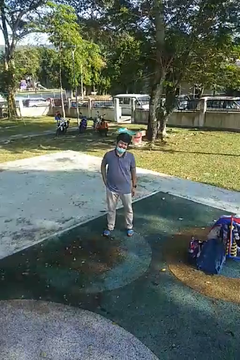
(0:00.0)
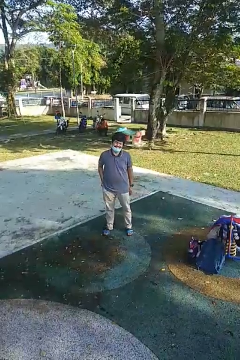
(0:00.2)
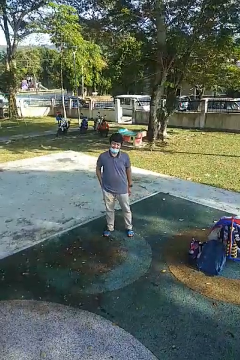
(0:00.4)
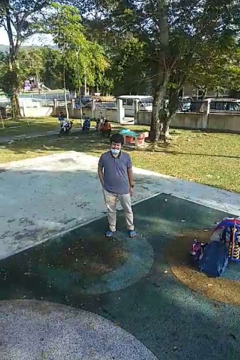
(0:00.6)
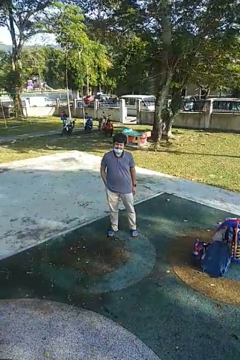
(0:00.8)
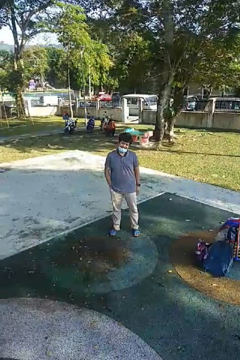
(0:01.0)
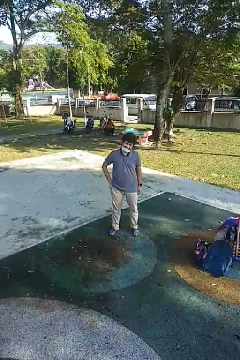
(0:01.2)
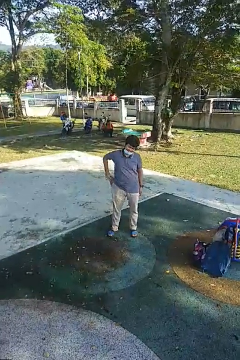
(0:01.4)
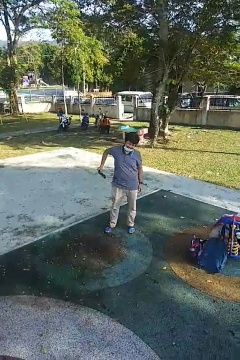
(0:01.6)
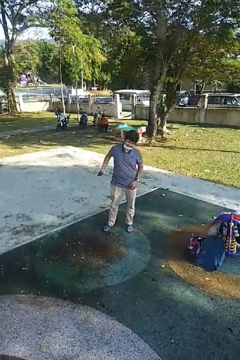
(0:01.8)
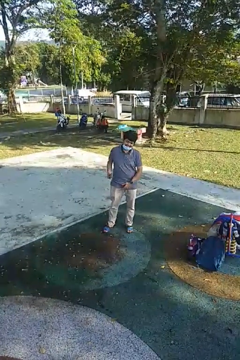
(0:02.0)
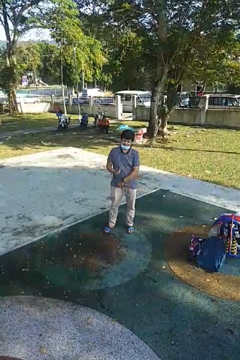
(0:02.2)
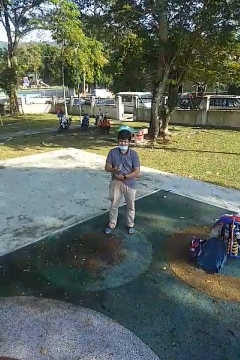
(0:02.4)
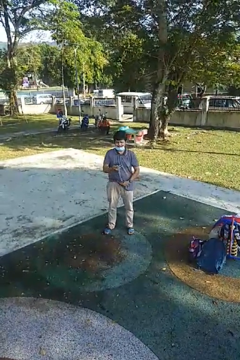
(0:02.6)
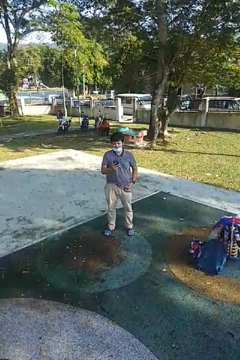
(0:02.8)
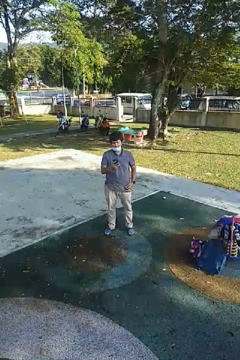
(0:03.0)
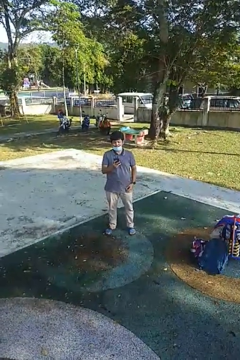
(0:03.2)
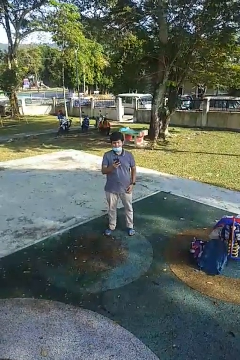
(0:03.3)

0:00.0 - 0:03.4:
person takes phone from pocket

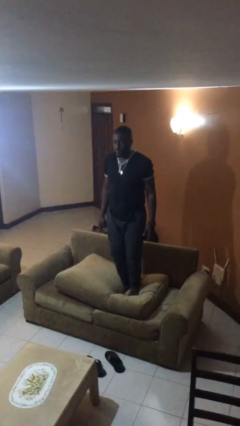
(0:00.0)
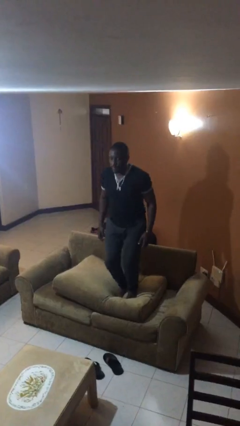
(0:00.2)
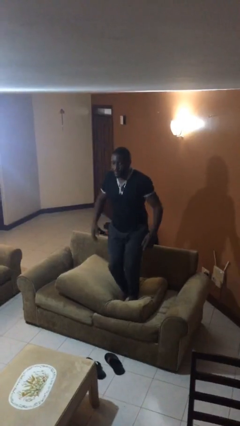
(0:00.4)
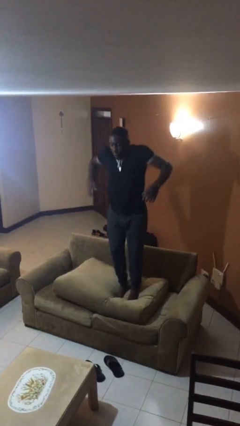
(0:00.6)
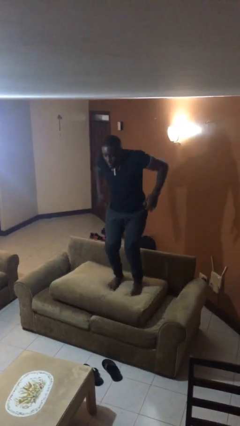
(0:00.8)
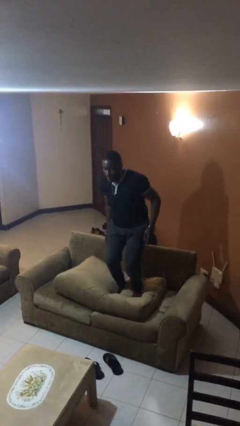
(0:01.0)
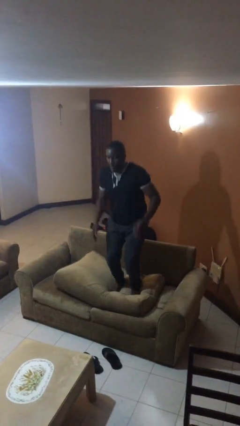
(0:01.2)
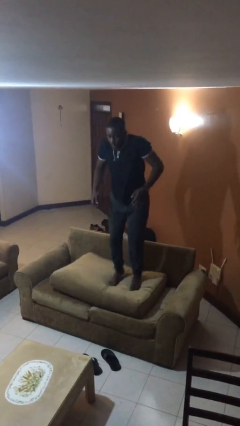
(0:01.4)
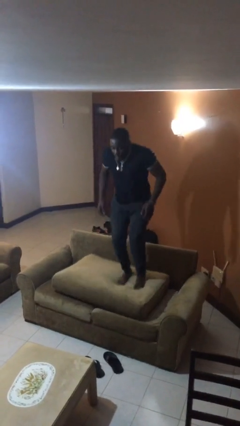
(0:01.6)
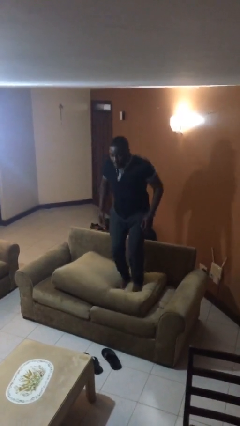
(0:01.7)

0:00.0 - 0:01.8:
person jumps on couch

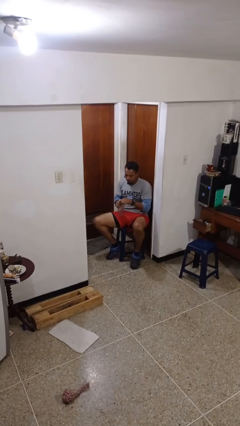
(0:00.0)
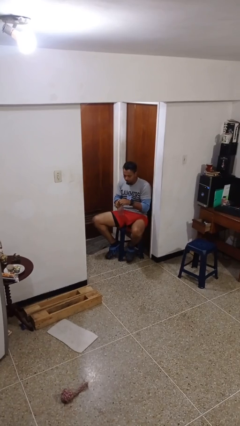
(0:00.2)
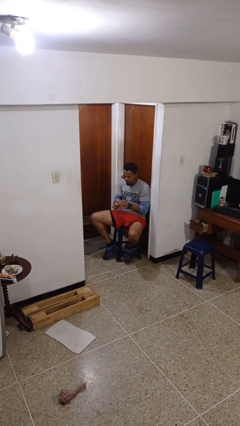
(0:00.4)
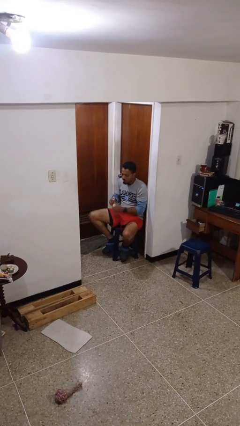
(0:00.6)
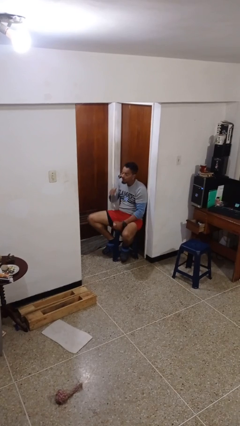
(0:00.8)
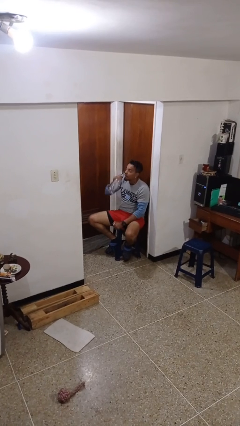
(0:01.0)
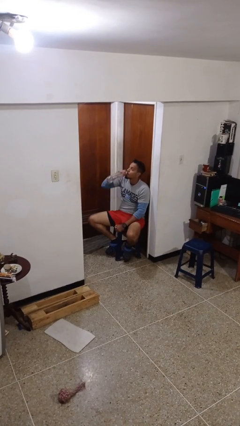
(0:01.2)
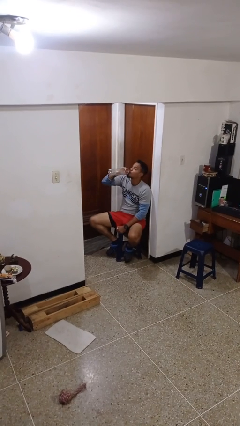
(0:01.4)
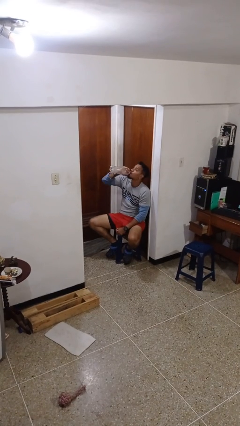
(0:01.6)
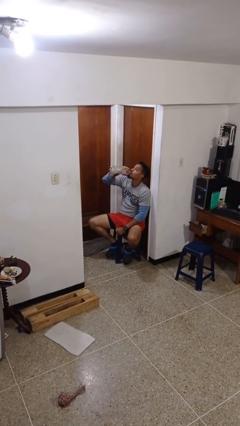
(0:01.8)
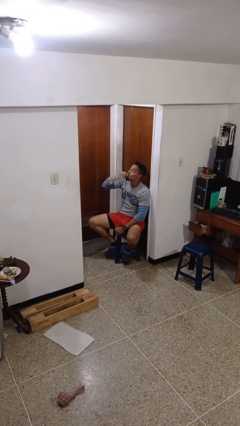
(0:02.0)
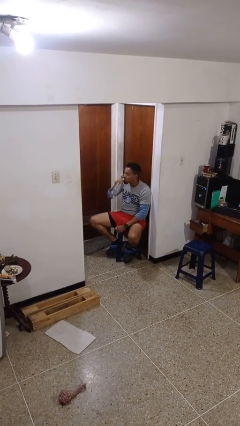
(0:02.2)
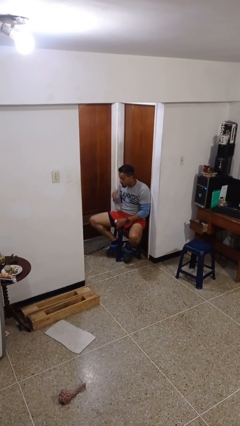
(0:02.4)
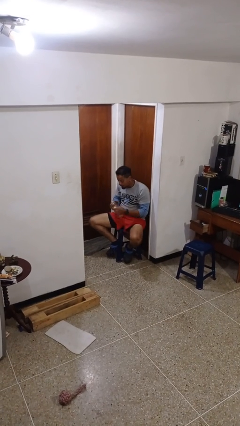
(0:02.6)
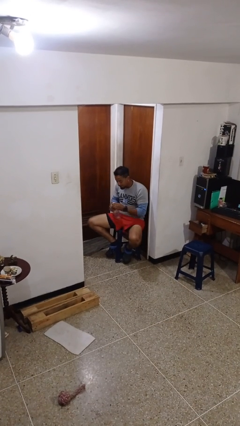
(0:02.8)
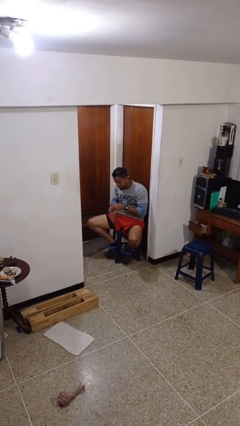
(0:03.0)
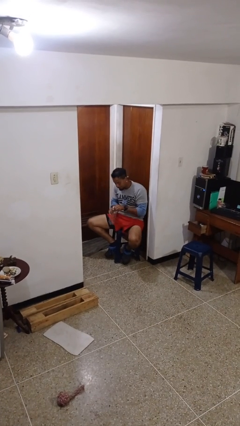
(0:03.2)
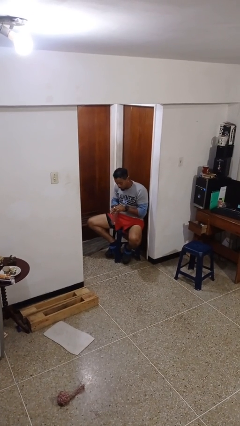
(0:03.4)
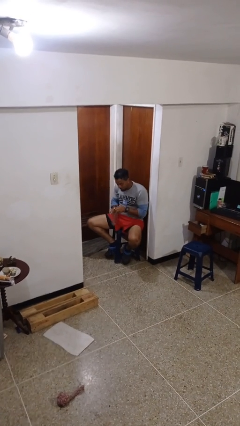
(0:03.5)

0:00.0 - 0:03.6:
person drinks from bottle

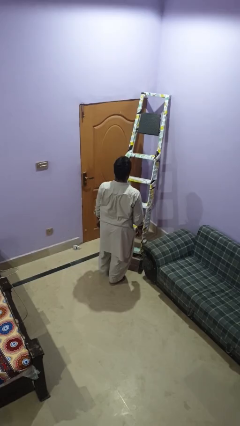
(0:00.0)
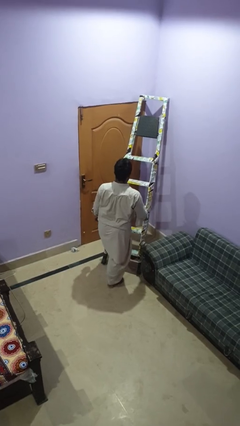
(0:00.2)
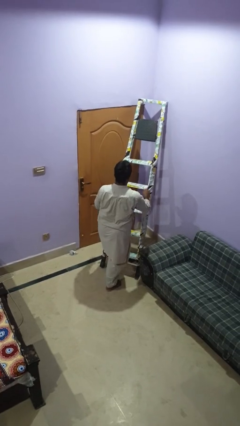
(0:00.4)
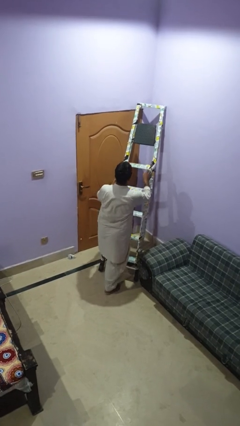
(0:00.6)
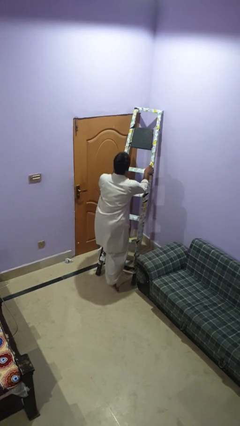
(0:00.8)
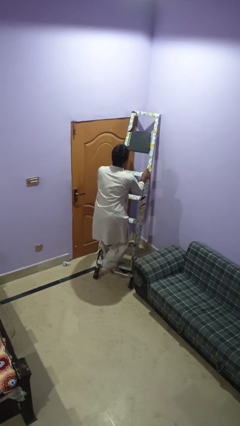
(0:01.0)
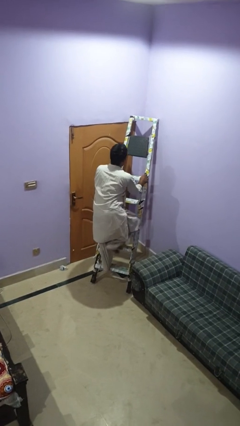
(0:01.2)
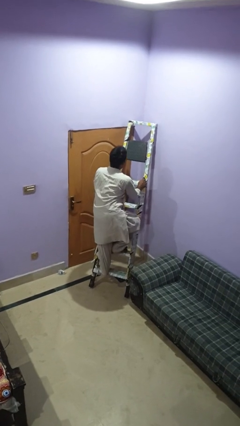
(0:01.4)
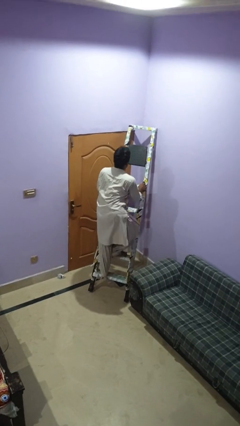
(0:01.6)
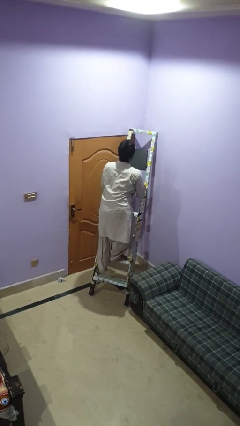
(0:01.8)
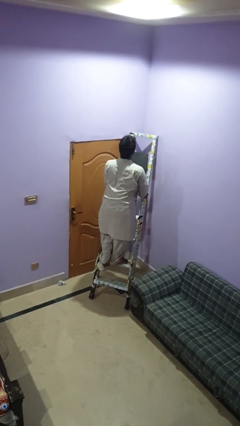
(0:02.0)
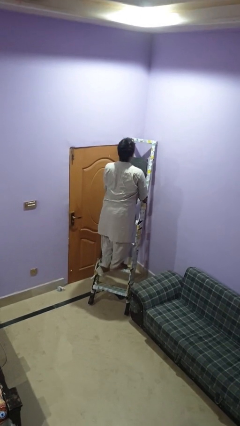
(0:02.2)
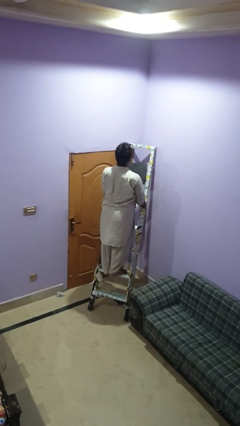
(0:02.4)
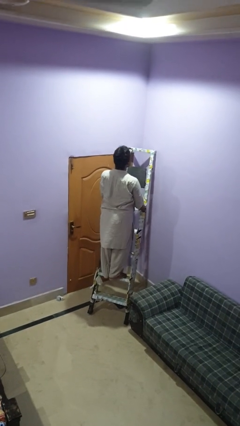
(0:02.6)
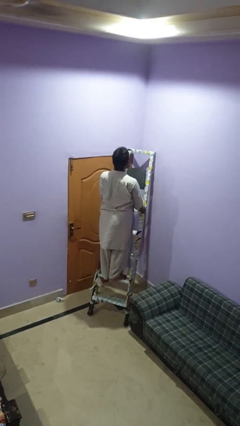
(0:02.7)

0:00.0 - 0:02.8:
person climbs up ladder

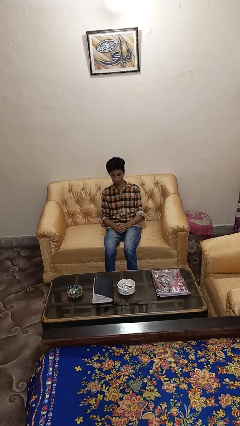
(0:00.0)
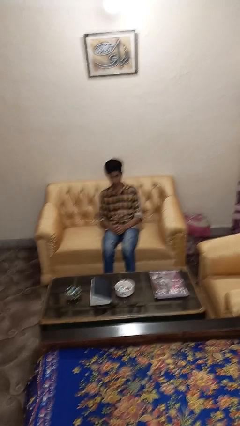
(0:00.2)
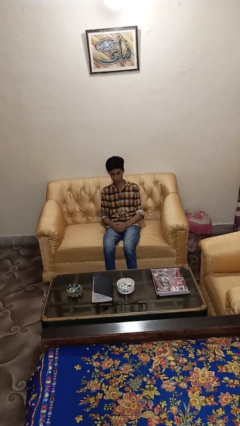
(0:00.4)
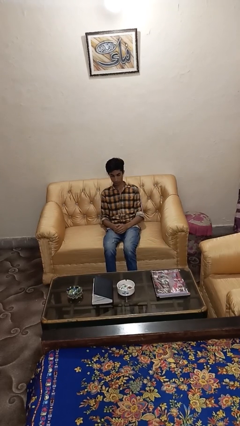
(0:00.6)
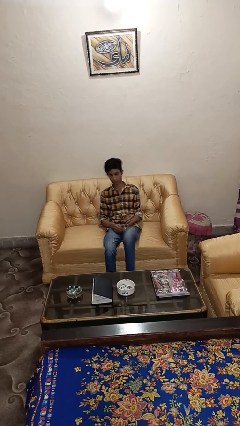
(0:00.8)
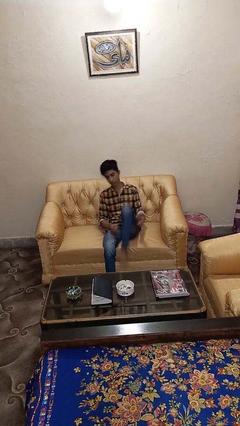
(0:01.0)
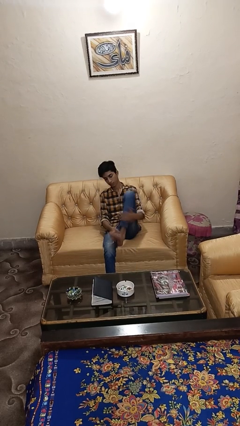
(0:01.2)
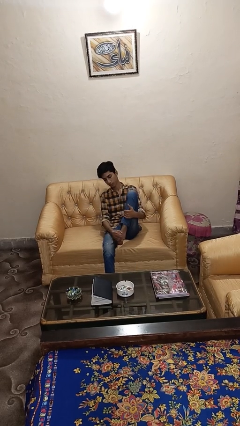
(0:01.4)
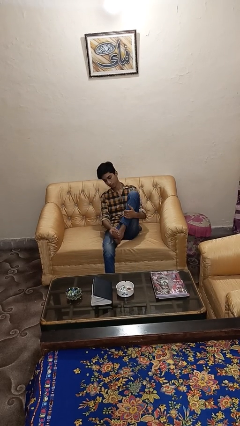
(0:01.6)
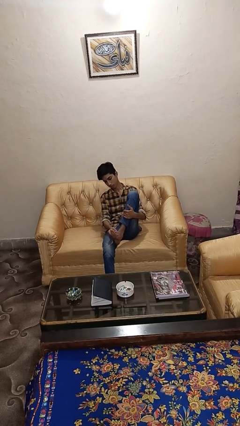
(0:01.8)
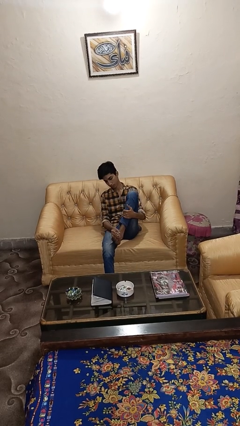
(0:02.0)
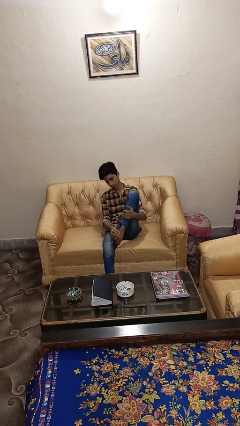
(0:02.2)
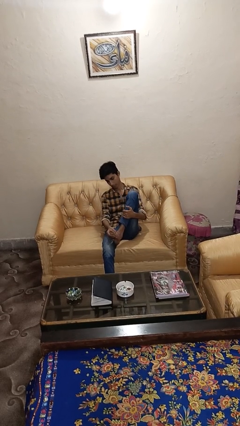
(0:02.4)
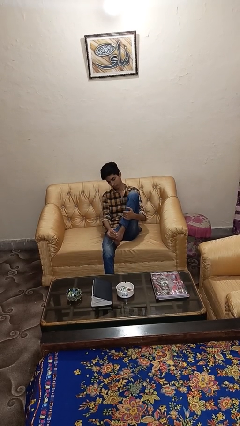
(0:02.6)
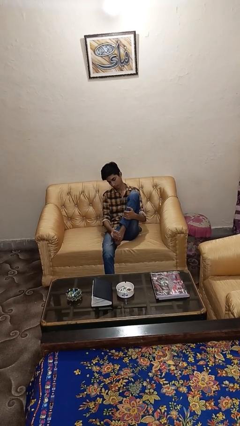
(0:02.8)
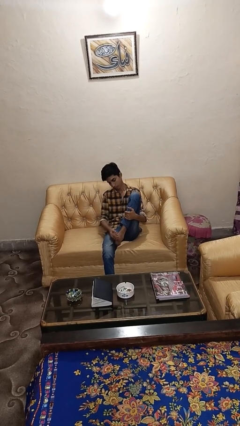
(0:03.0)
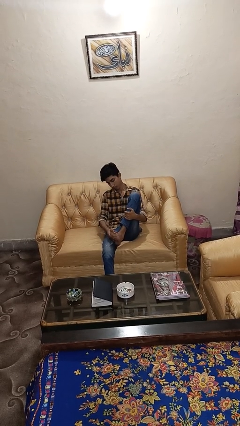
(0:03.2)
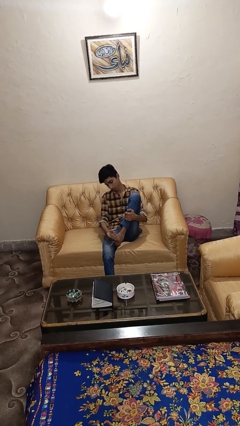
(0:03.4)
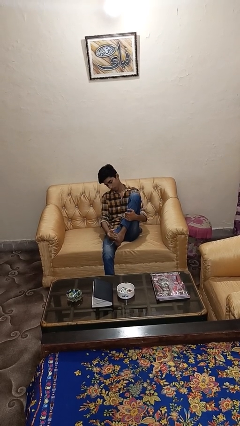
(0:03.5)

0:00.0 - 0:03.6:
person rubs foot

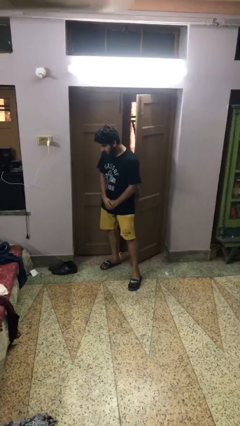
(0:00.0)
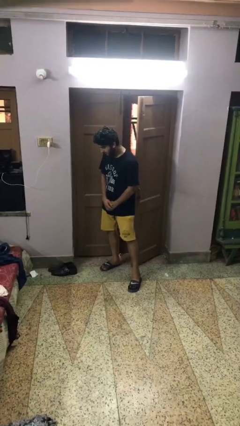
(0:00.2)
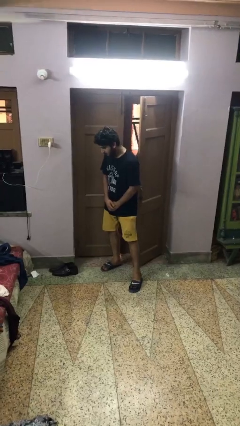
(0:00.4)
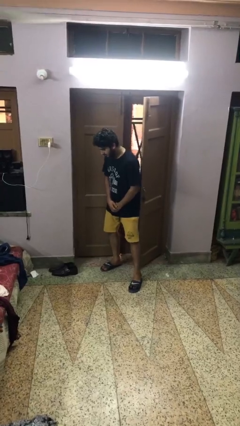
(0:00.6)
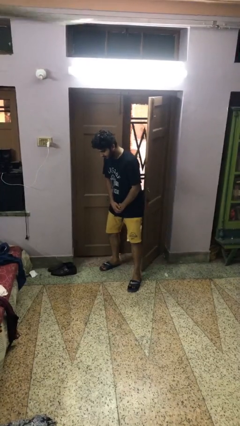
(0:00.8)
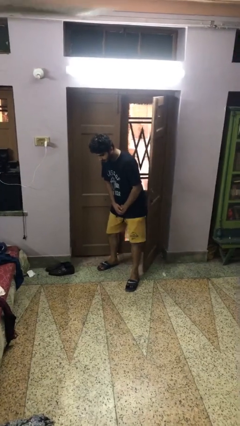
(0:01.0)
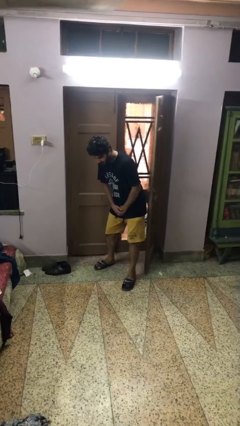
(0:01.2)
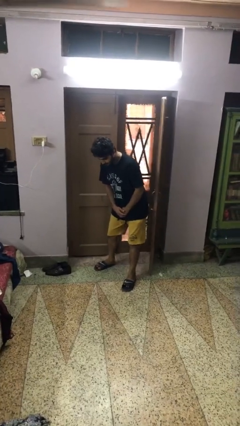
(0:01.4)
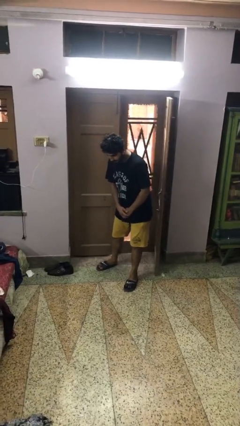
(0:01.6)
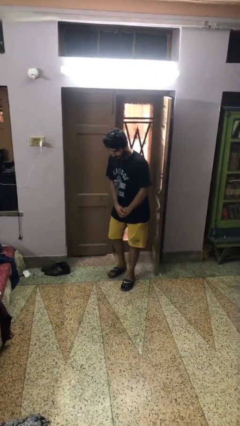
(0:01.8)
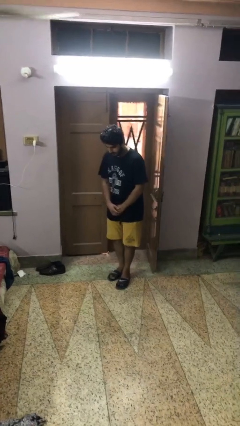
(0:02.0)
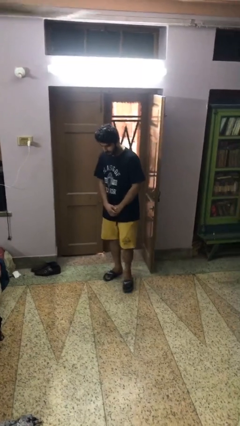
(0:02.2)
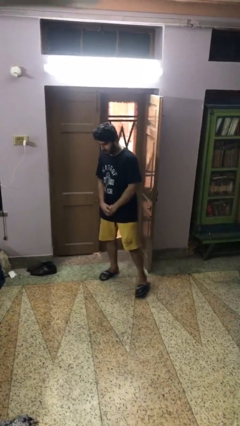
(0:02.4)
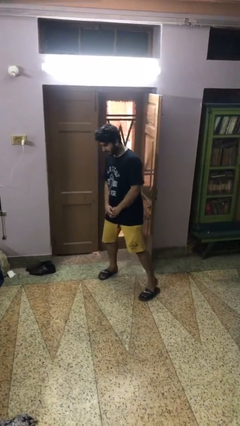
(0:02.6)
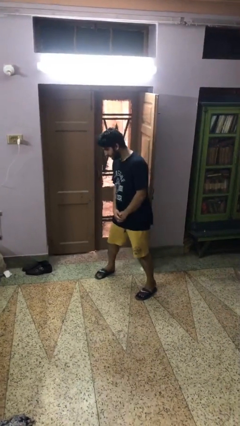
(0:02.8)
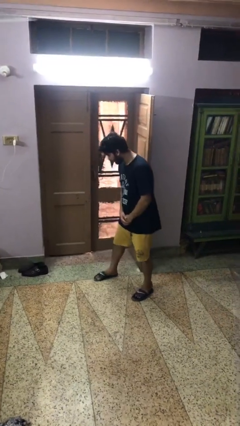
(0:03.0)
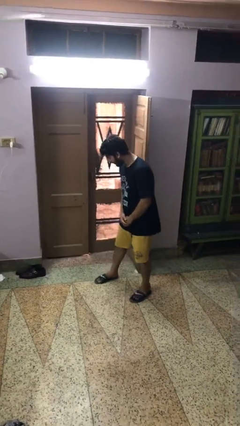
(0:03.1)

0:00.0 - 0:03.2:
person opens facility door

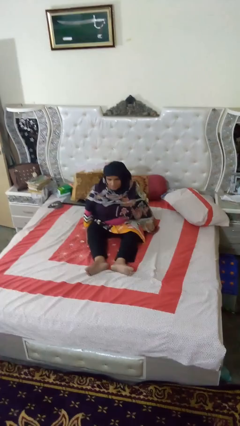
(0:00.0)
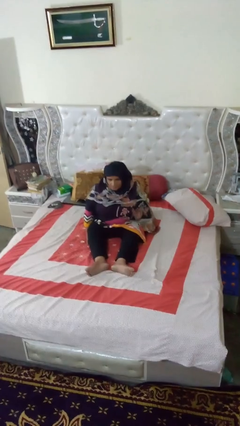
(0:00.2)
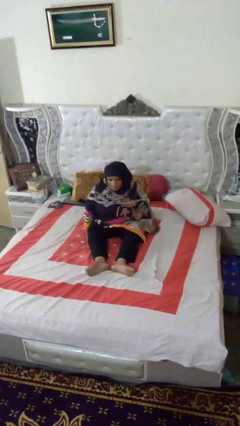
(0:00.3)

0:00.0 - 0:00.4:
person stands up
